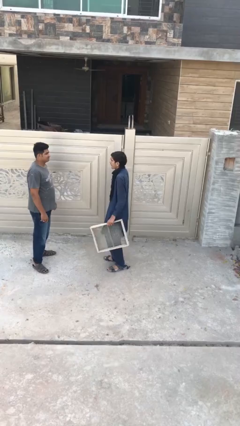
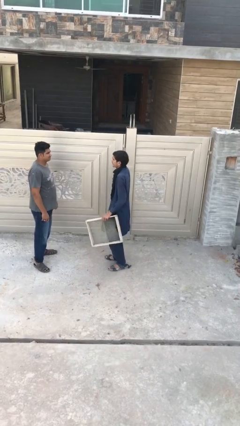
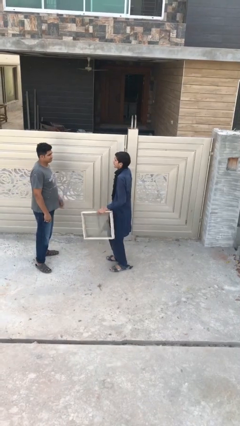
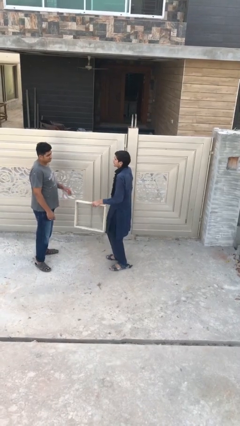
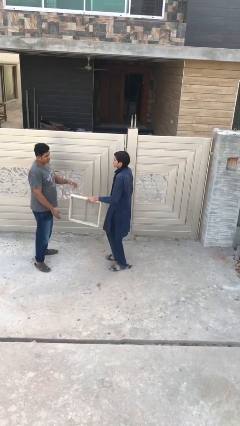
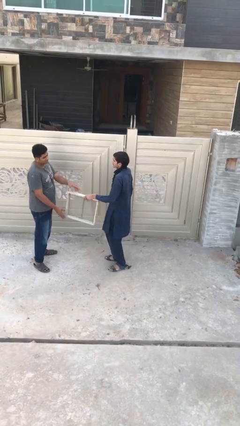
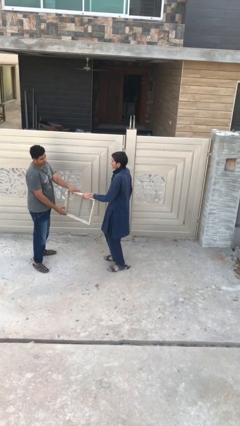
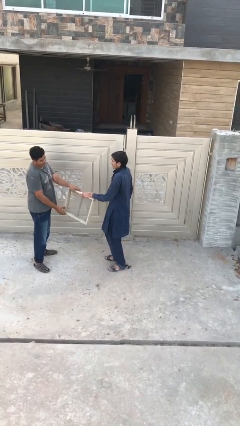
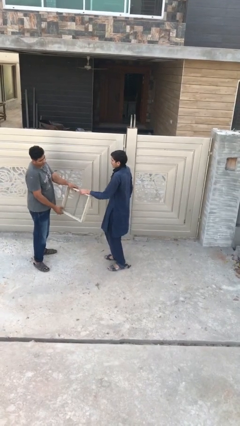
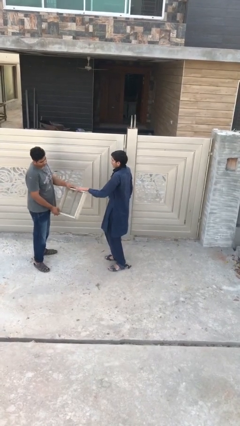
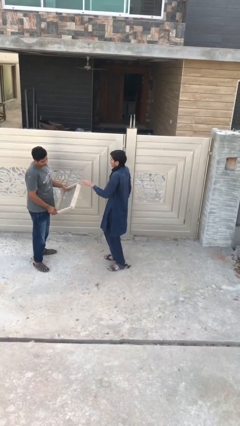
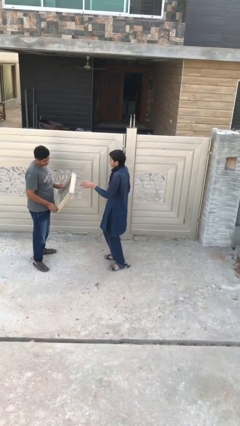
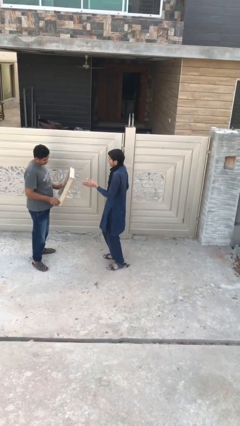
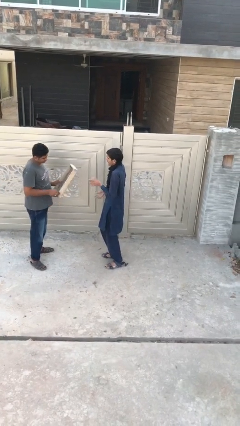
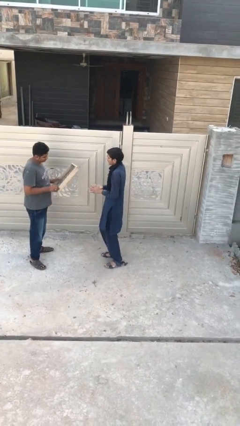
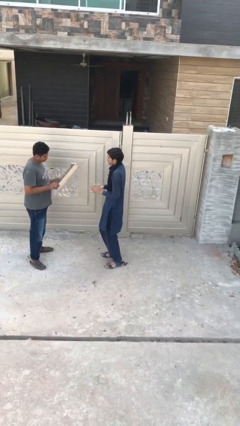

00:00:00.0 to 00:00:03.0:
person transfers object to person

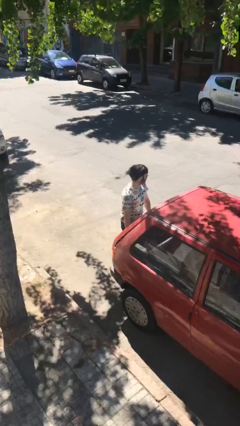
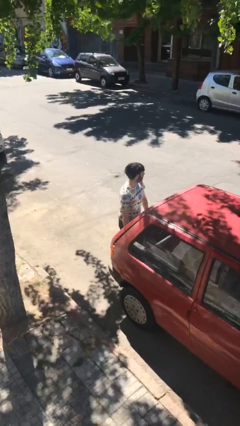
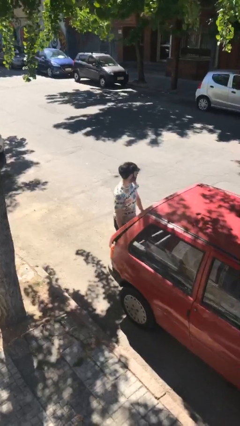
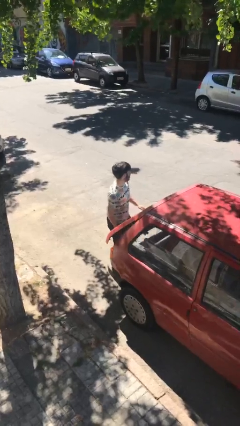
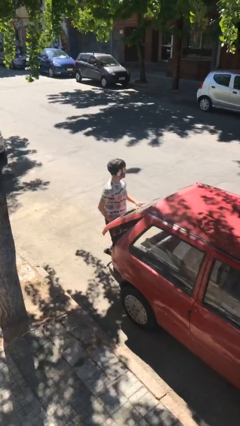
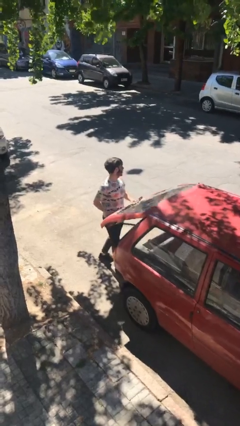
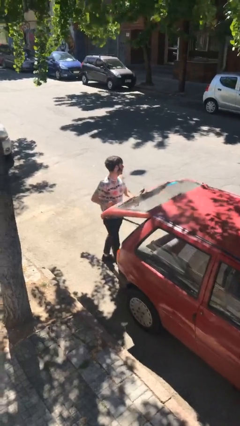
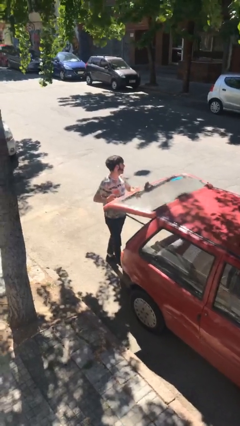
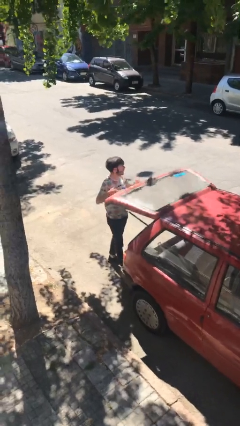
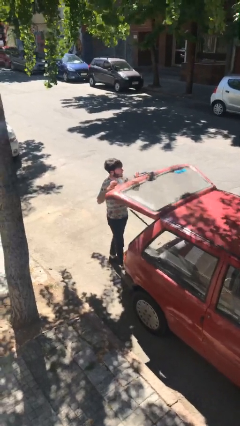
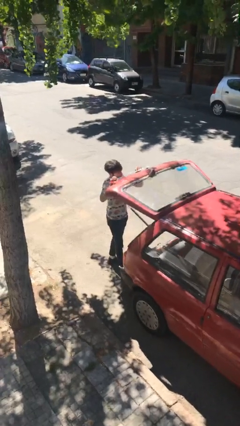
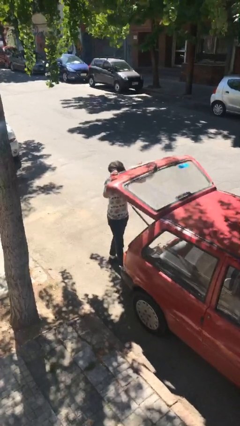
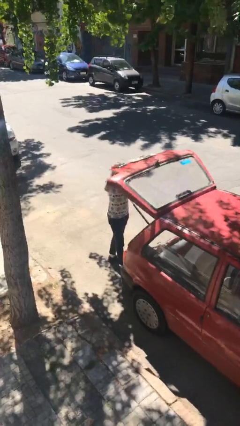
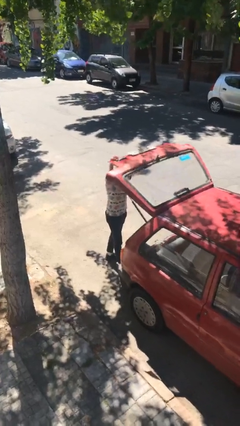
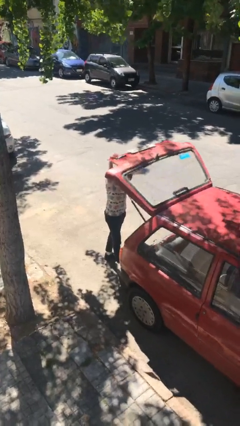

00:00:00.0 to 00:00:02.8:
person opens car trunk

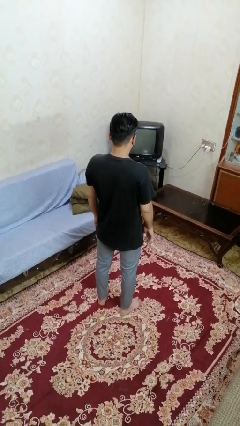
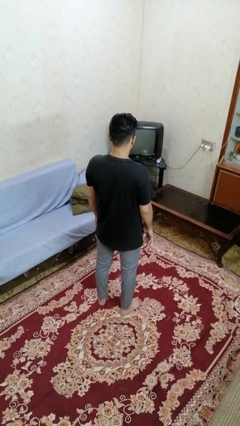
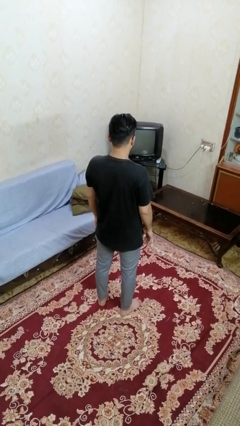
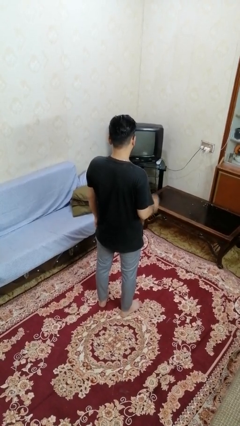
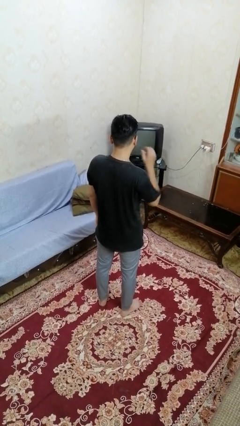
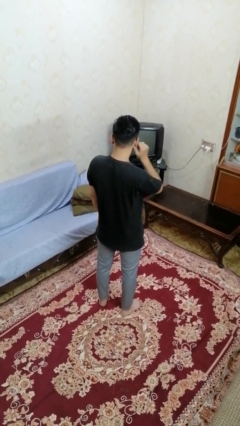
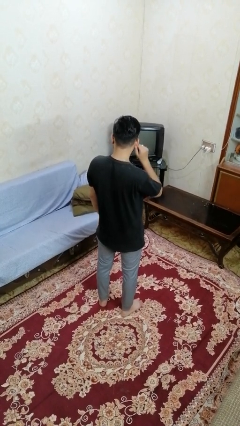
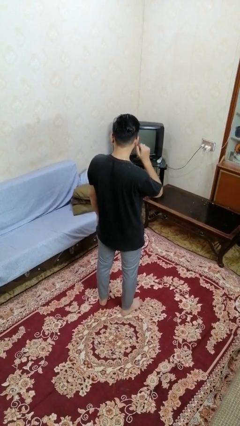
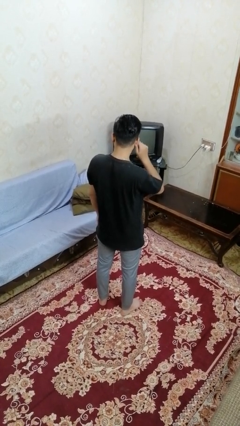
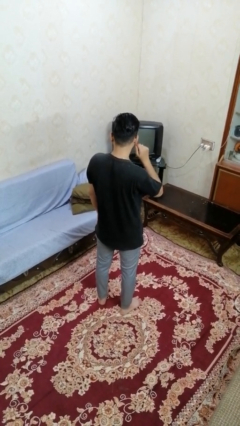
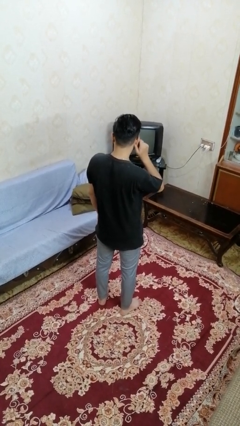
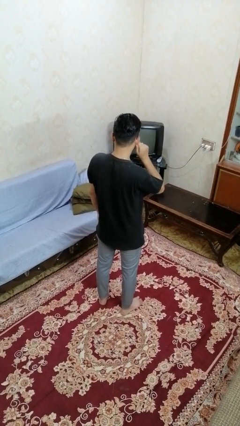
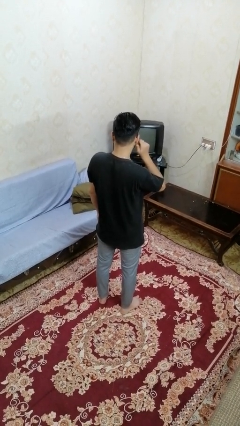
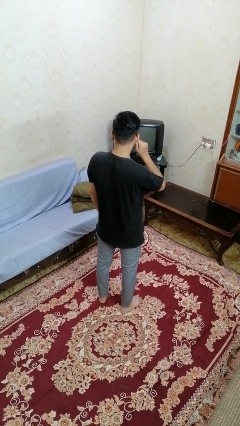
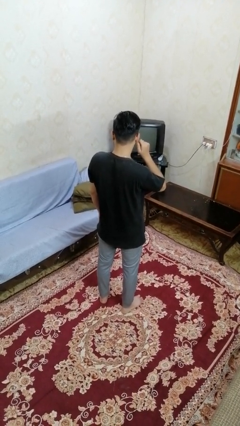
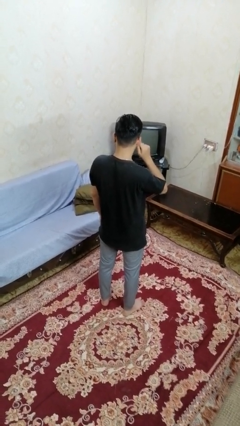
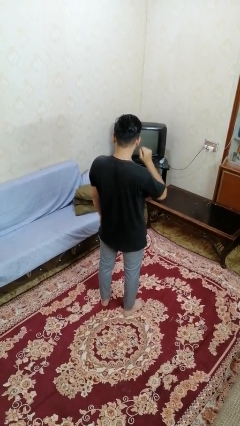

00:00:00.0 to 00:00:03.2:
person touches earlobe

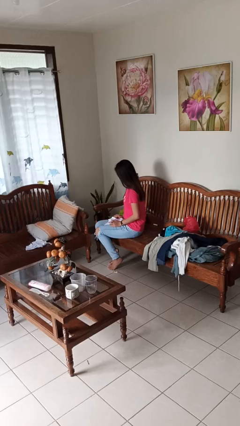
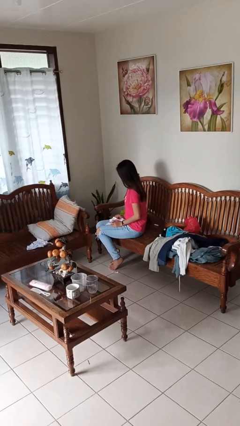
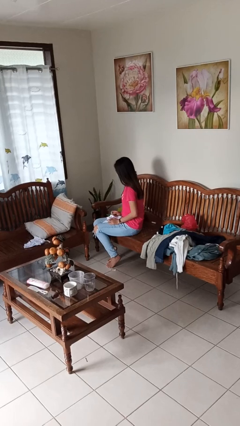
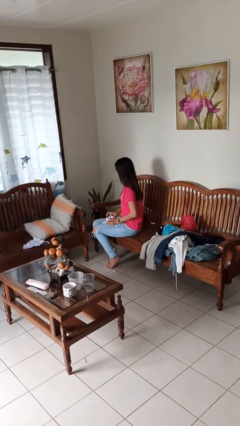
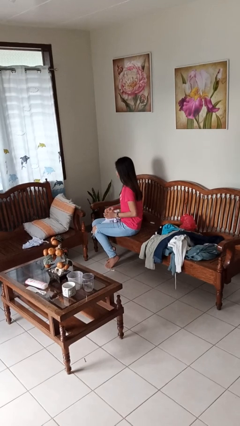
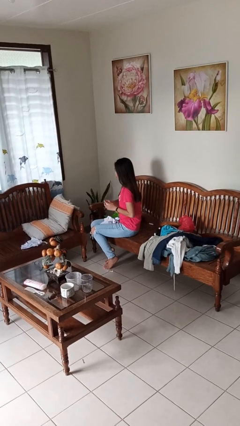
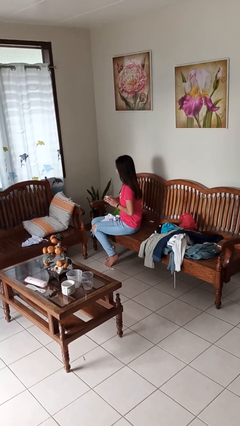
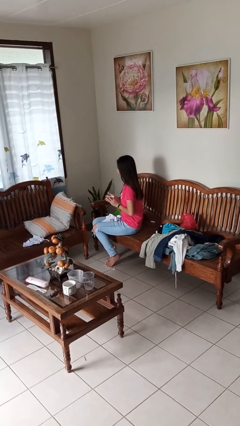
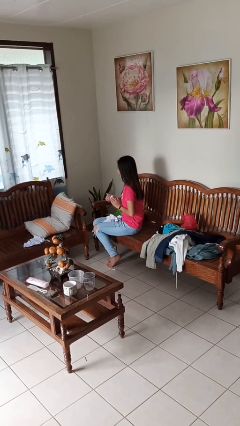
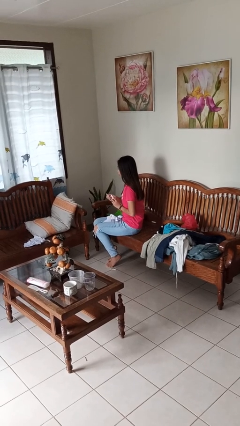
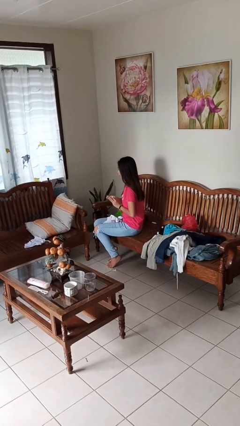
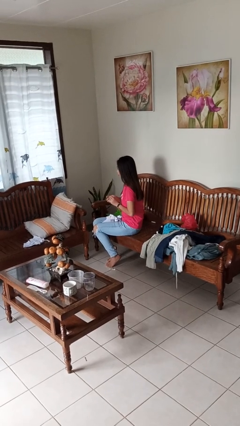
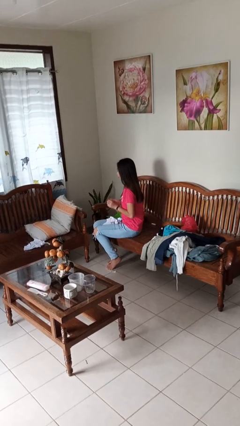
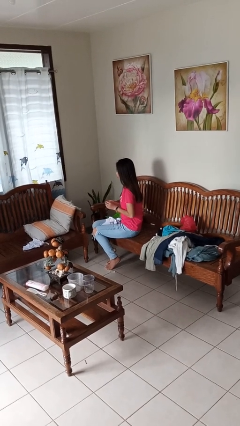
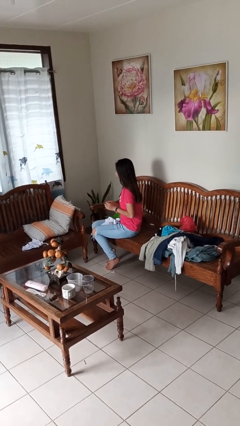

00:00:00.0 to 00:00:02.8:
person crumples paper

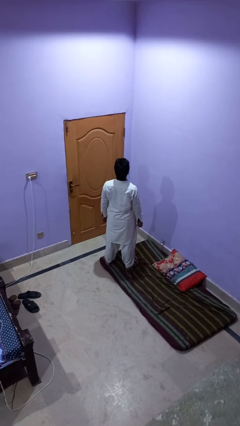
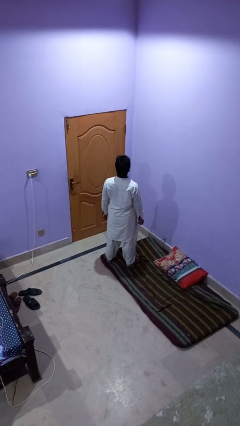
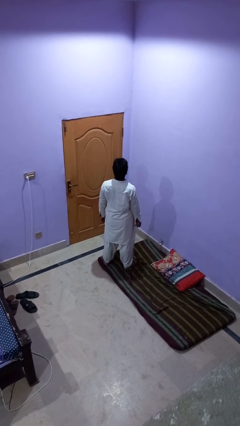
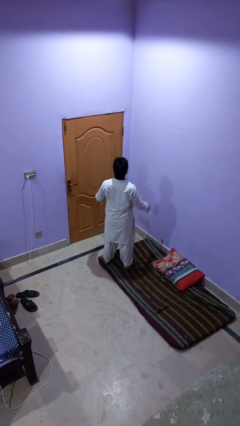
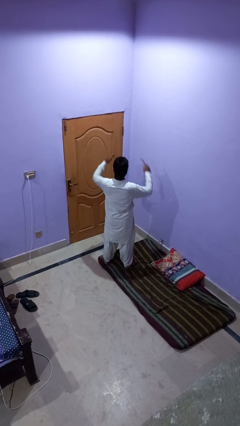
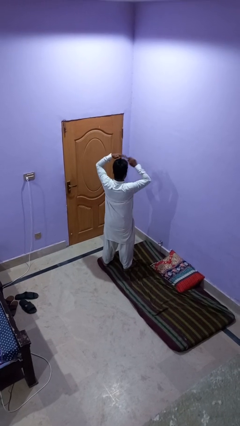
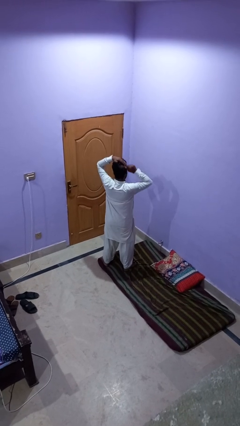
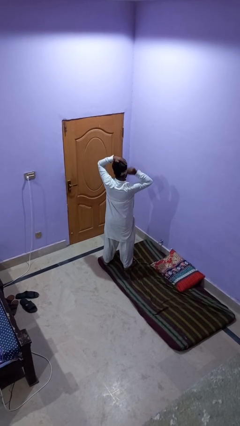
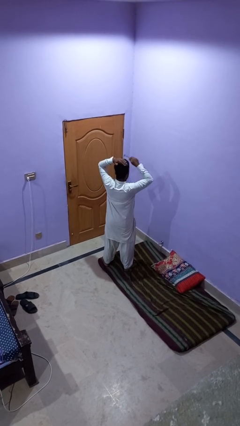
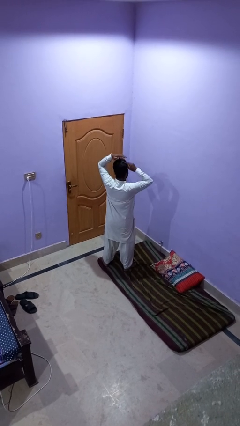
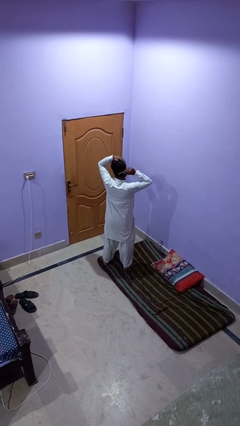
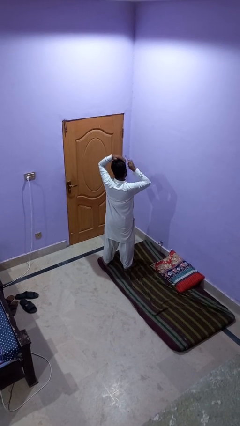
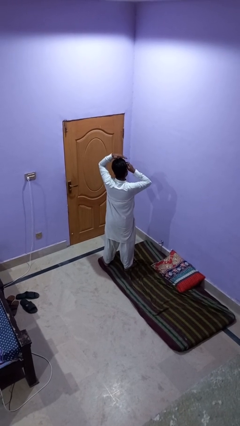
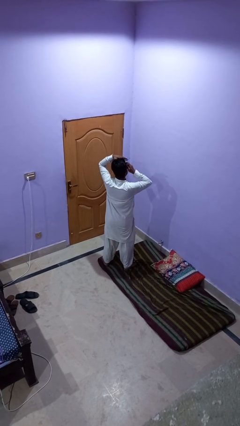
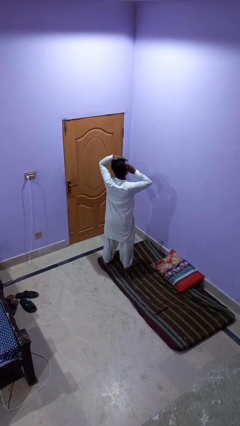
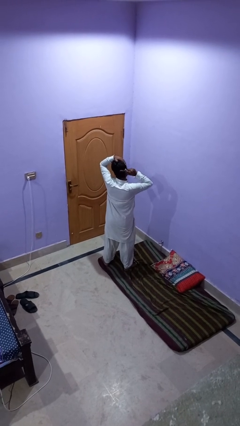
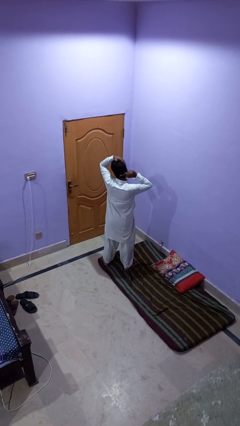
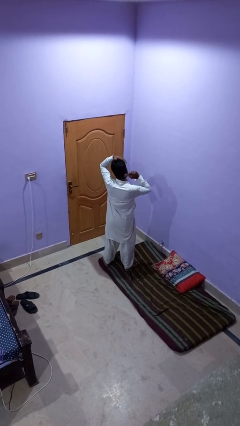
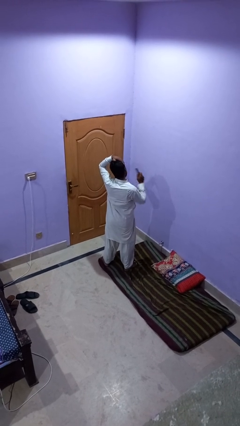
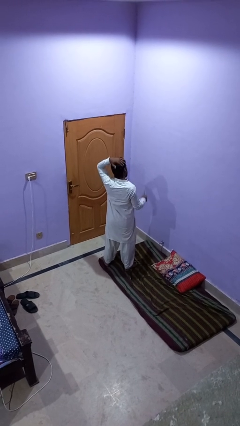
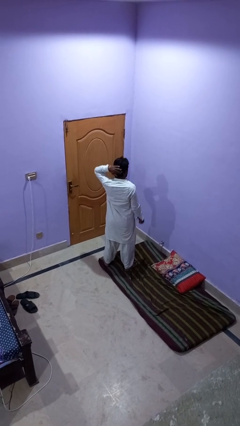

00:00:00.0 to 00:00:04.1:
person brushes hair

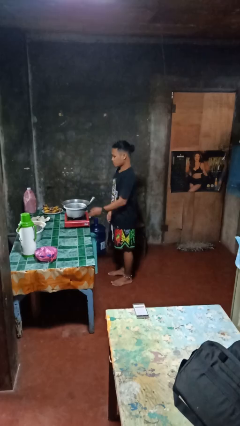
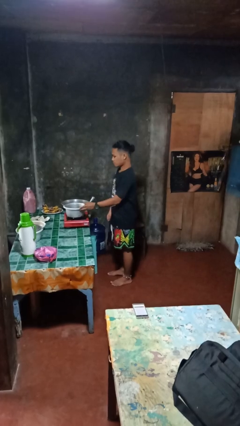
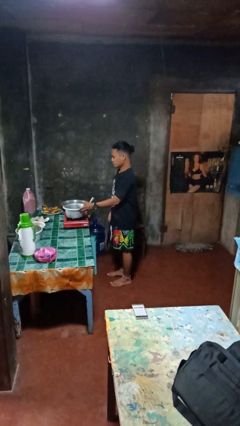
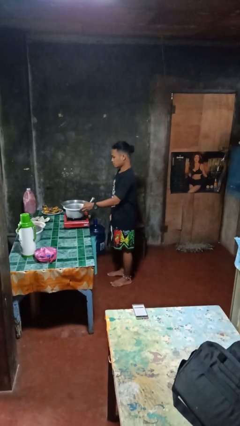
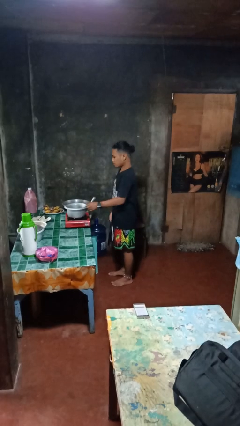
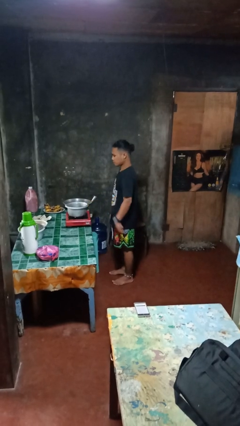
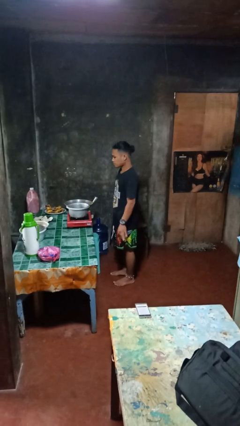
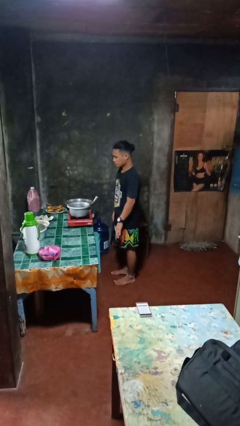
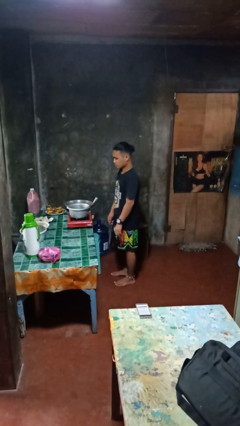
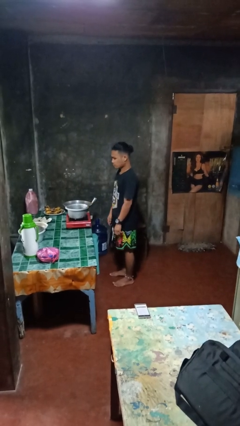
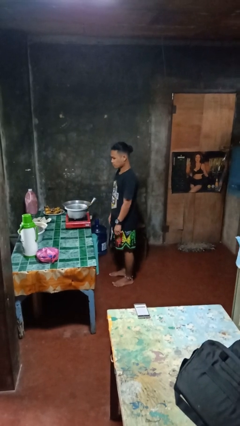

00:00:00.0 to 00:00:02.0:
person burns hand
